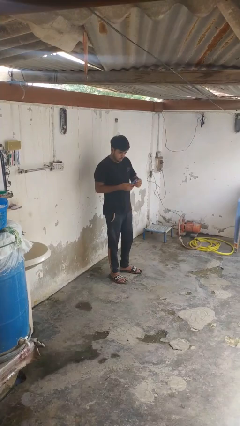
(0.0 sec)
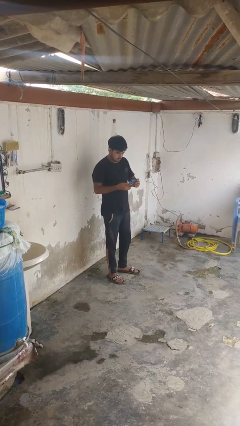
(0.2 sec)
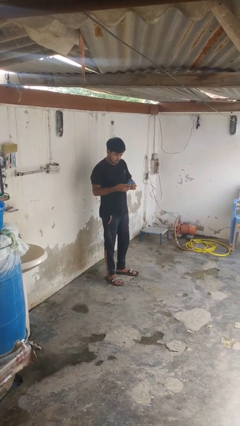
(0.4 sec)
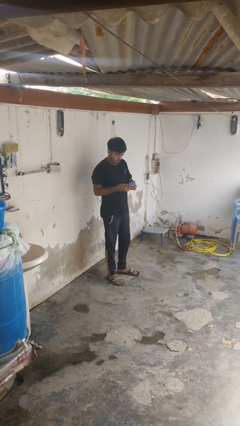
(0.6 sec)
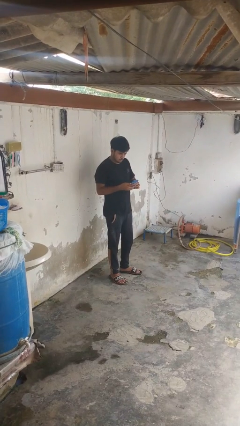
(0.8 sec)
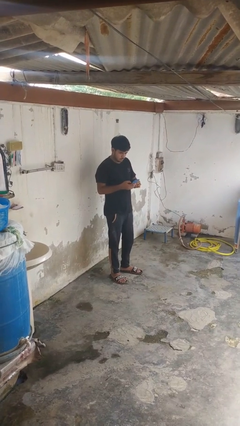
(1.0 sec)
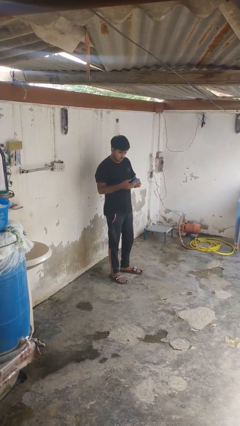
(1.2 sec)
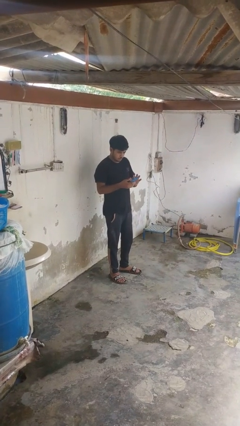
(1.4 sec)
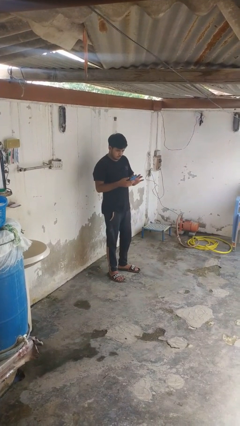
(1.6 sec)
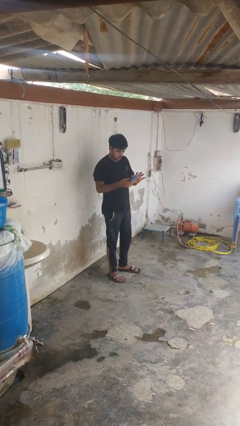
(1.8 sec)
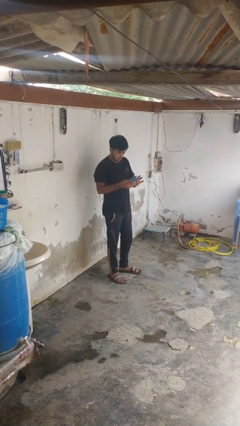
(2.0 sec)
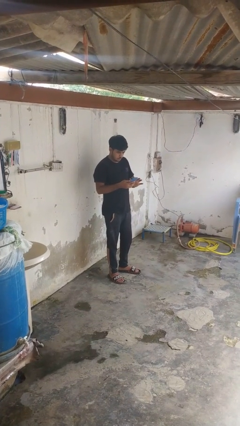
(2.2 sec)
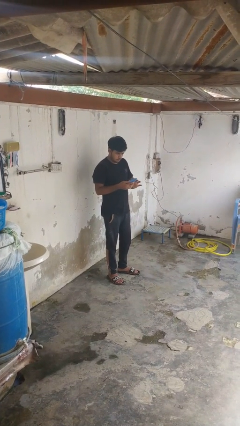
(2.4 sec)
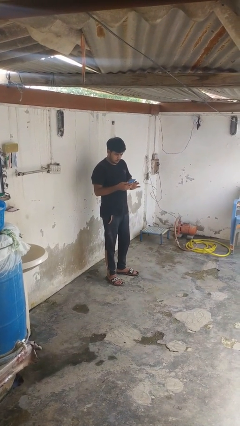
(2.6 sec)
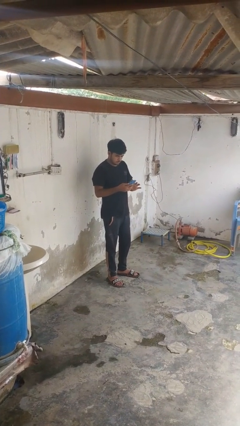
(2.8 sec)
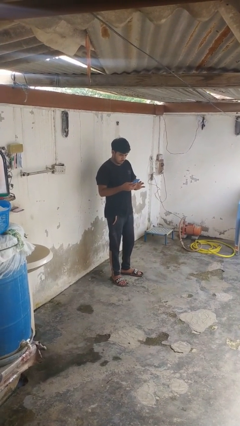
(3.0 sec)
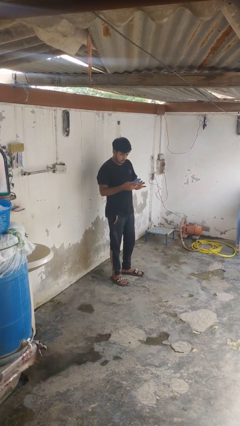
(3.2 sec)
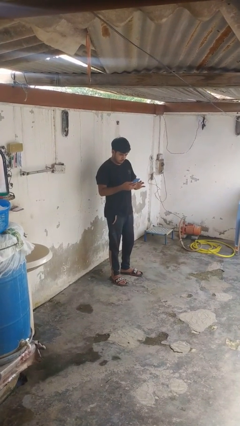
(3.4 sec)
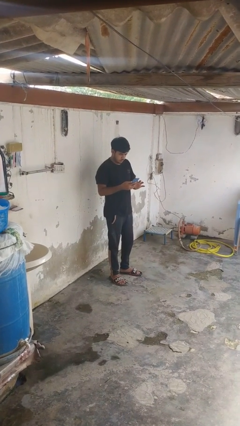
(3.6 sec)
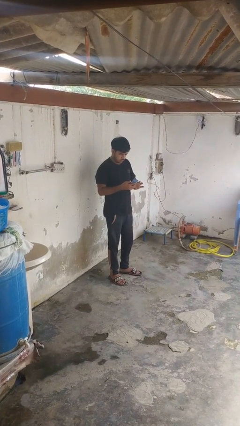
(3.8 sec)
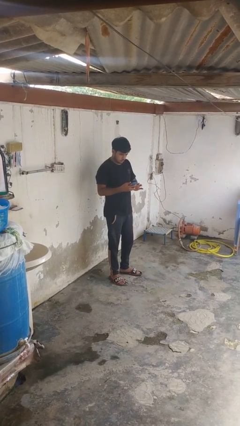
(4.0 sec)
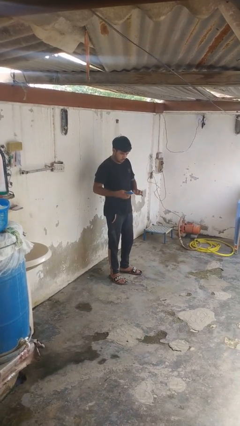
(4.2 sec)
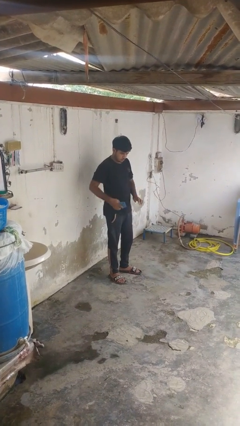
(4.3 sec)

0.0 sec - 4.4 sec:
person takes phone from pocket

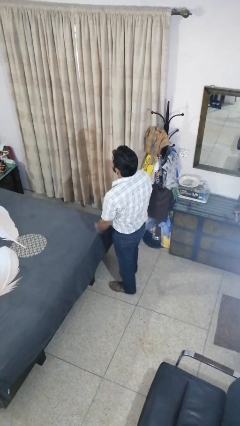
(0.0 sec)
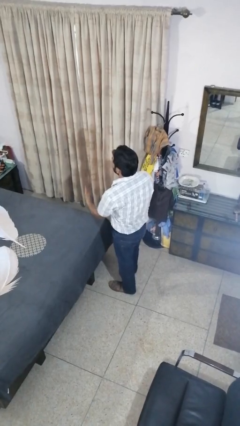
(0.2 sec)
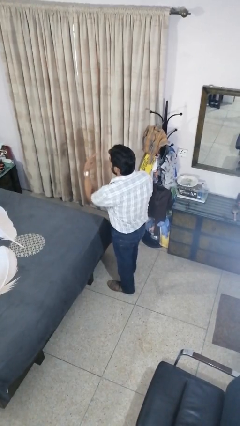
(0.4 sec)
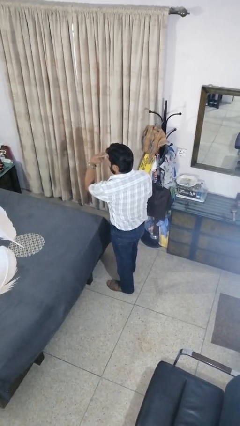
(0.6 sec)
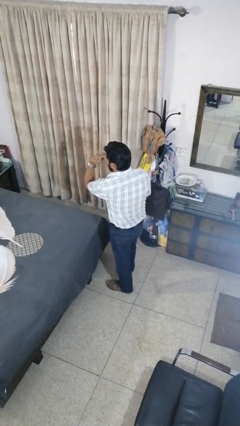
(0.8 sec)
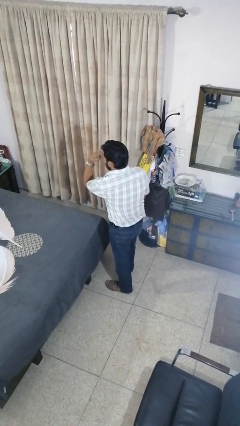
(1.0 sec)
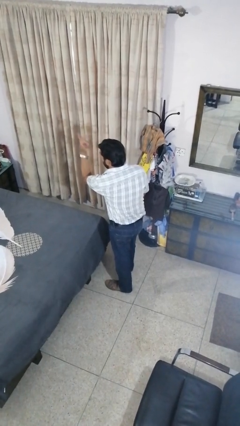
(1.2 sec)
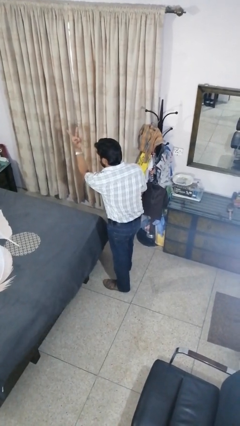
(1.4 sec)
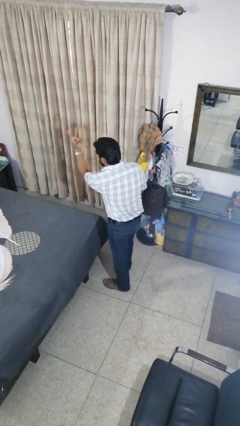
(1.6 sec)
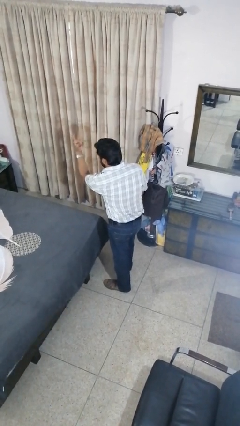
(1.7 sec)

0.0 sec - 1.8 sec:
person gestures watch closely

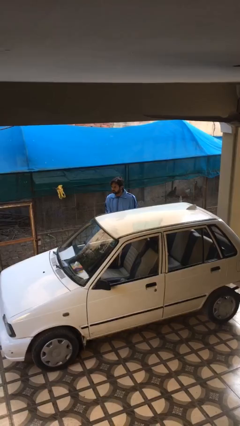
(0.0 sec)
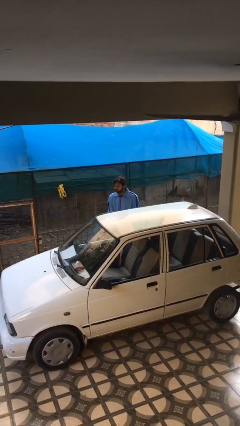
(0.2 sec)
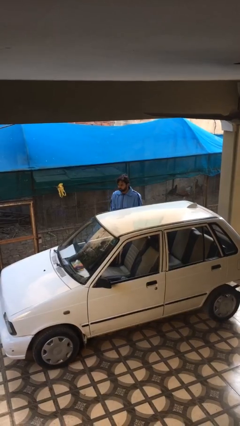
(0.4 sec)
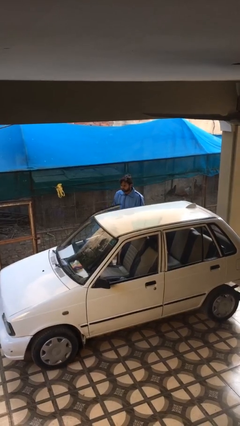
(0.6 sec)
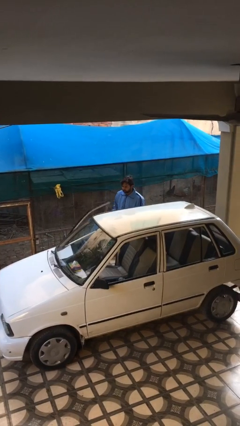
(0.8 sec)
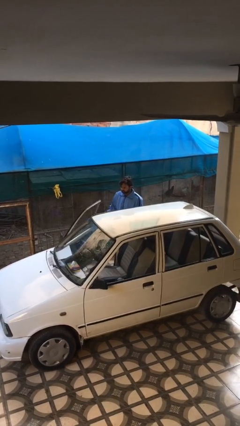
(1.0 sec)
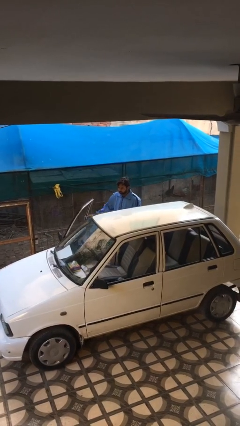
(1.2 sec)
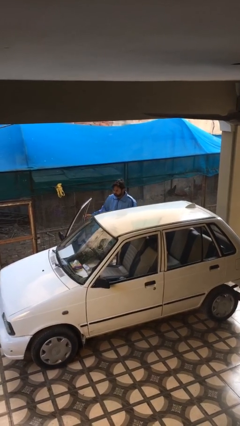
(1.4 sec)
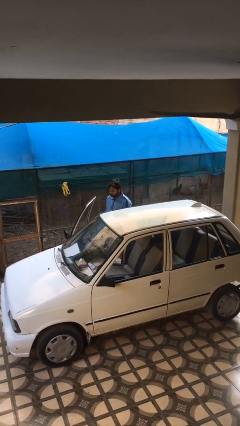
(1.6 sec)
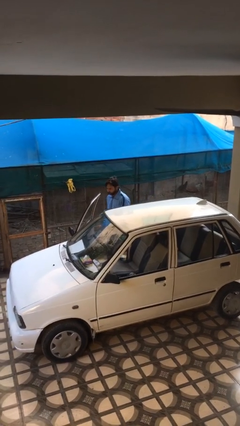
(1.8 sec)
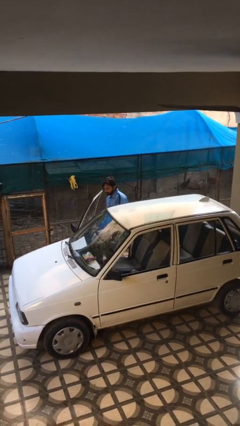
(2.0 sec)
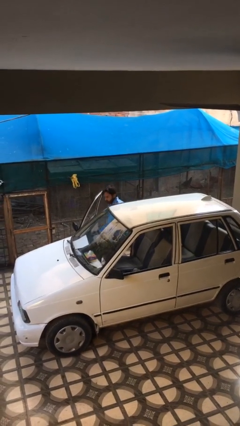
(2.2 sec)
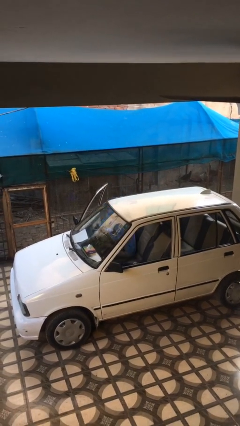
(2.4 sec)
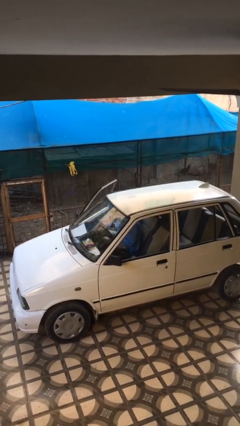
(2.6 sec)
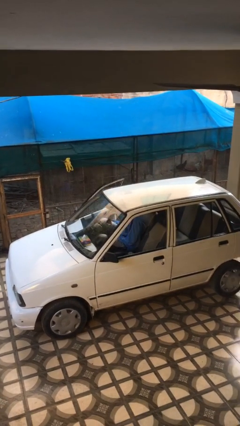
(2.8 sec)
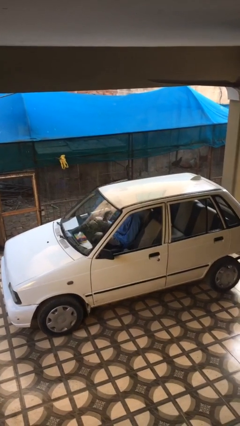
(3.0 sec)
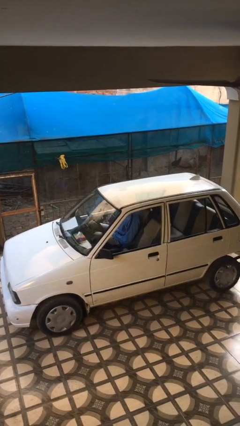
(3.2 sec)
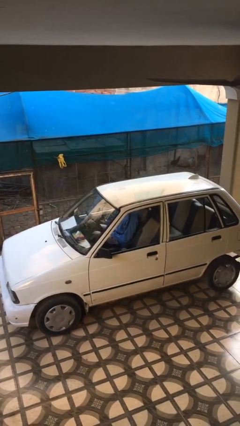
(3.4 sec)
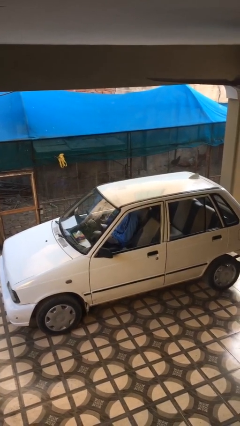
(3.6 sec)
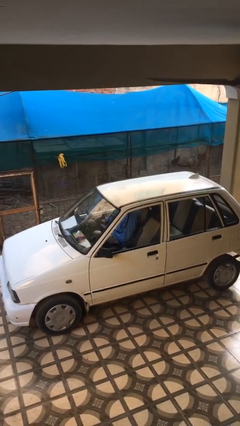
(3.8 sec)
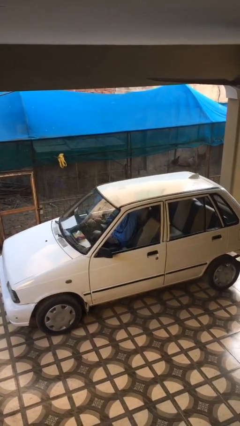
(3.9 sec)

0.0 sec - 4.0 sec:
person enters car

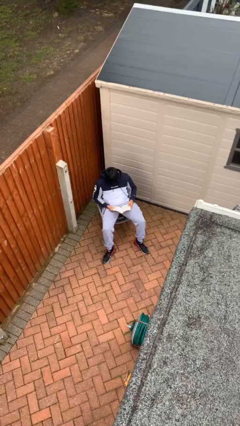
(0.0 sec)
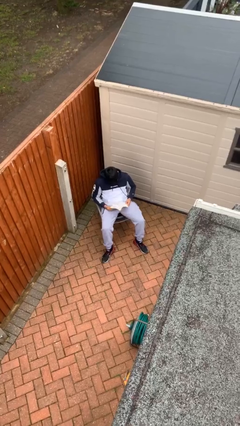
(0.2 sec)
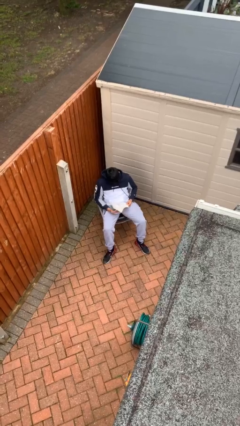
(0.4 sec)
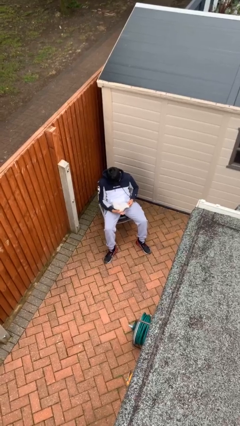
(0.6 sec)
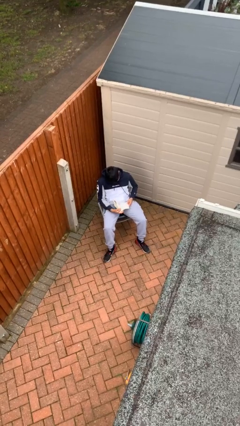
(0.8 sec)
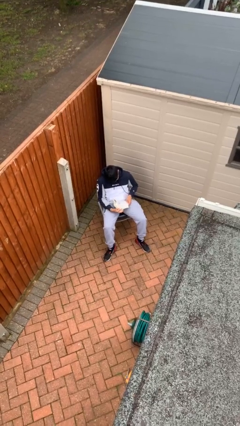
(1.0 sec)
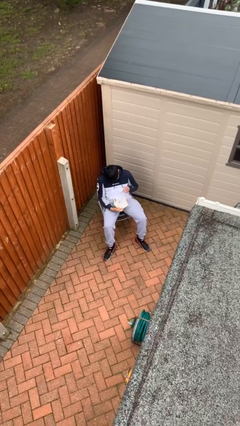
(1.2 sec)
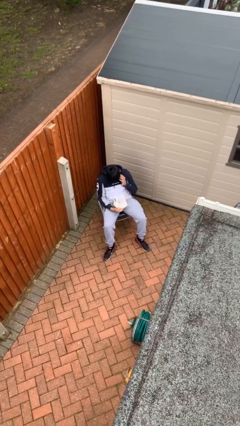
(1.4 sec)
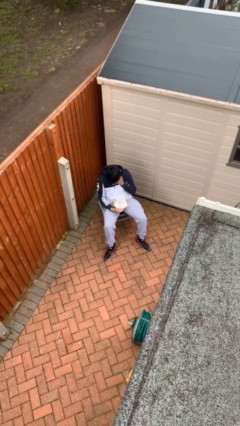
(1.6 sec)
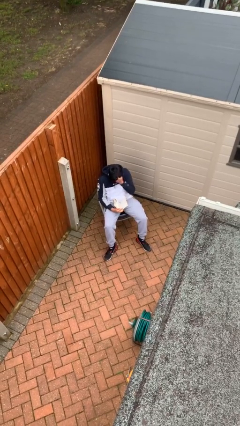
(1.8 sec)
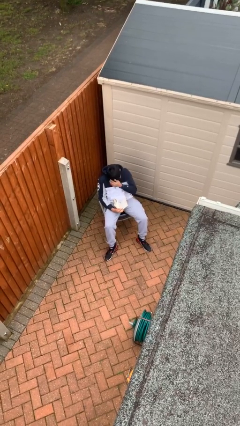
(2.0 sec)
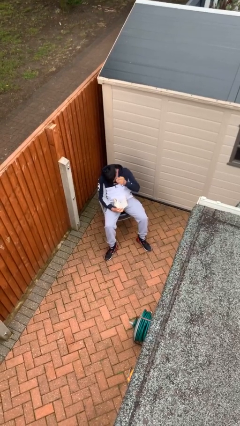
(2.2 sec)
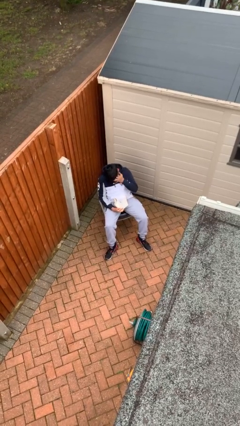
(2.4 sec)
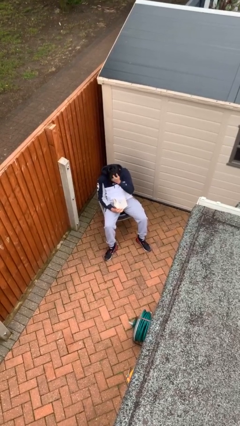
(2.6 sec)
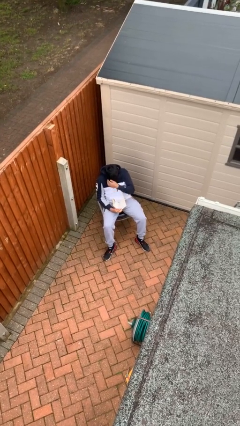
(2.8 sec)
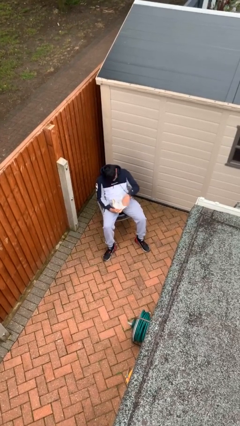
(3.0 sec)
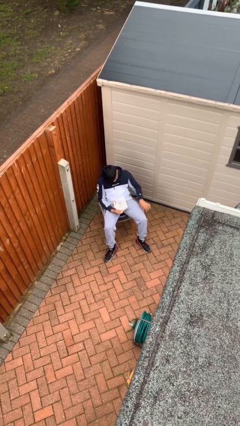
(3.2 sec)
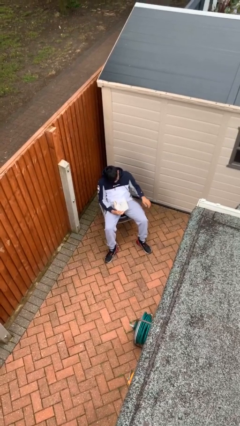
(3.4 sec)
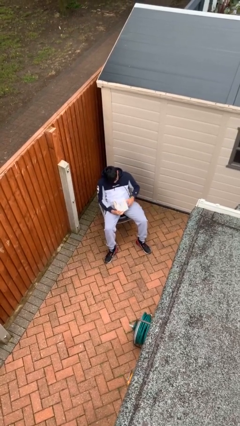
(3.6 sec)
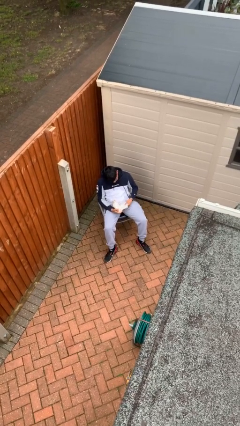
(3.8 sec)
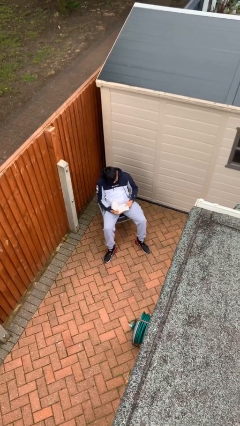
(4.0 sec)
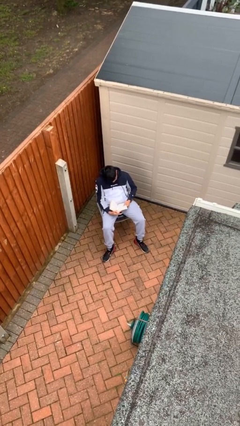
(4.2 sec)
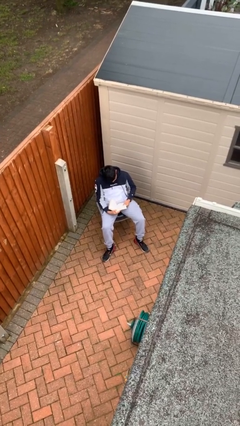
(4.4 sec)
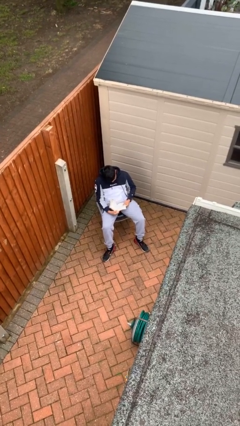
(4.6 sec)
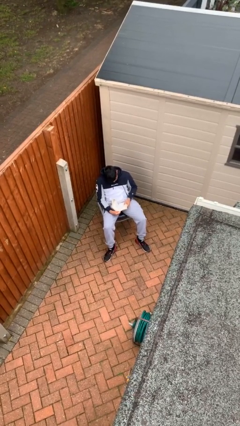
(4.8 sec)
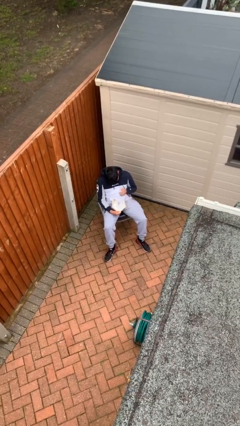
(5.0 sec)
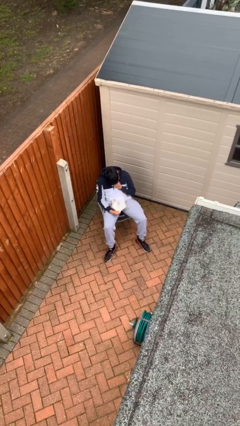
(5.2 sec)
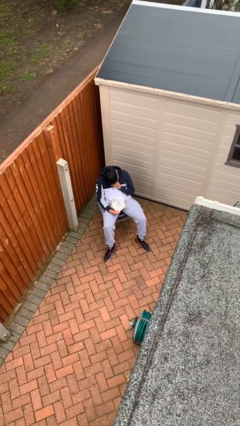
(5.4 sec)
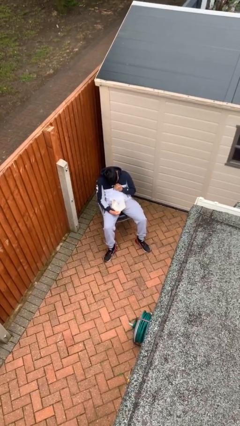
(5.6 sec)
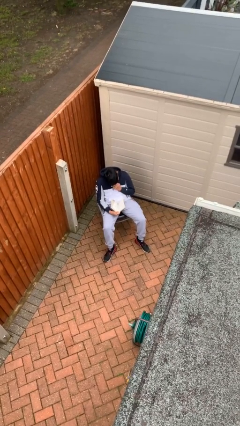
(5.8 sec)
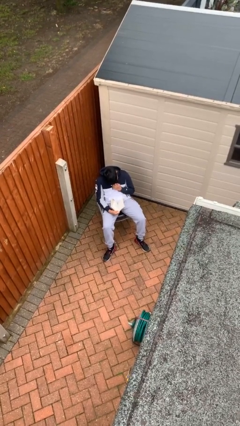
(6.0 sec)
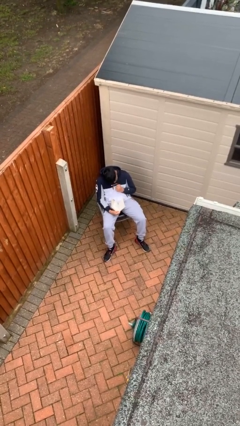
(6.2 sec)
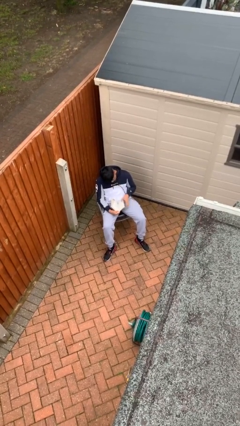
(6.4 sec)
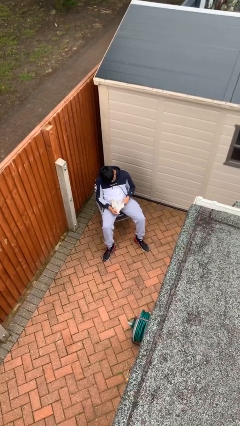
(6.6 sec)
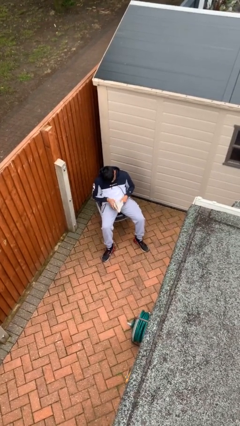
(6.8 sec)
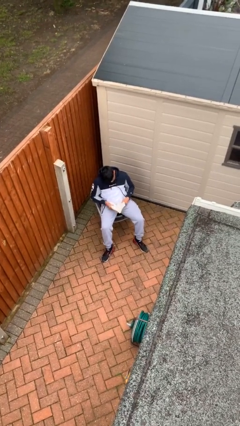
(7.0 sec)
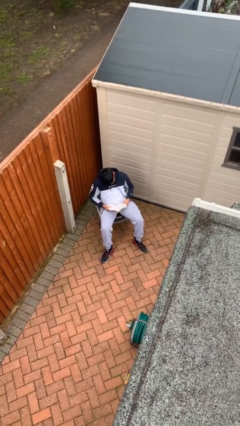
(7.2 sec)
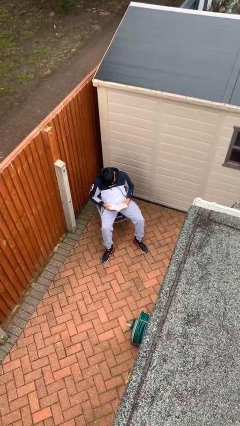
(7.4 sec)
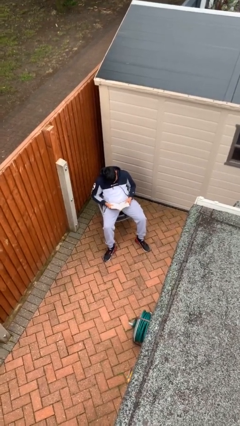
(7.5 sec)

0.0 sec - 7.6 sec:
person reads document
